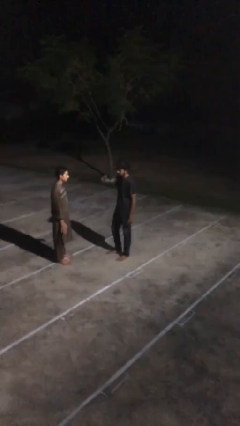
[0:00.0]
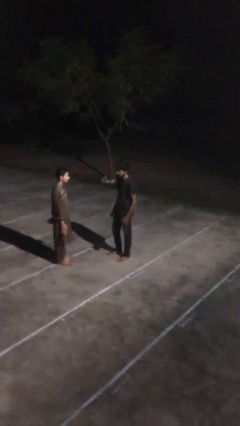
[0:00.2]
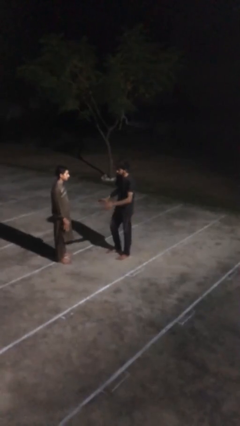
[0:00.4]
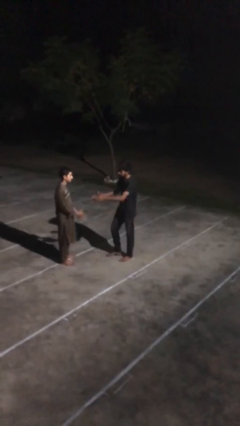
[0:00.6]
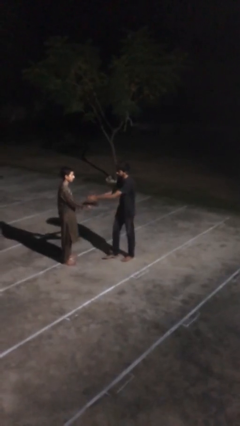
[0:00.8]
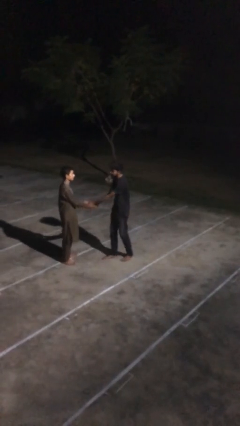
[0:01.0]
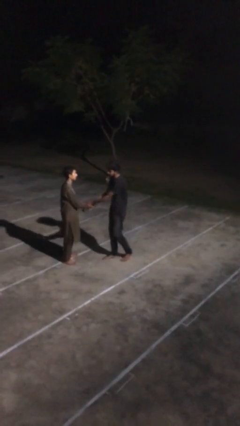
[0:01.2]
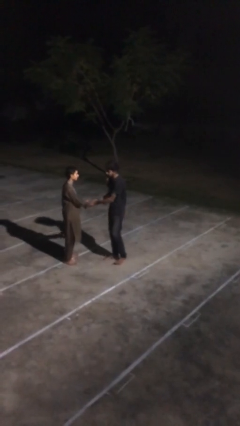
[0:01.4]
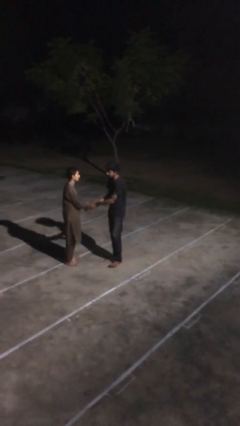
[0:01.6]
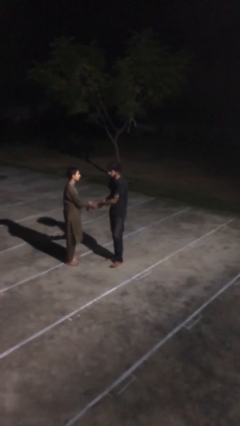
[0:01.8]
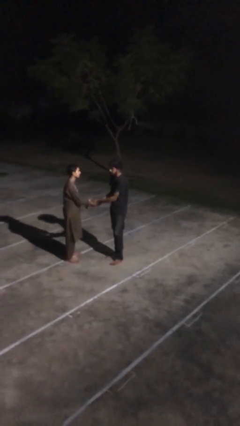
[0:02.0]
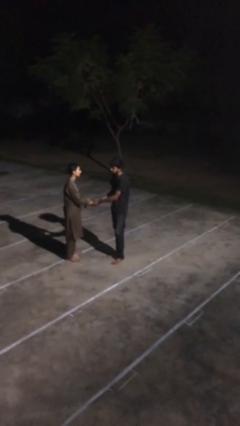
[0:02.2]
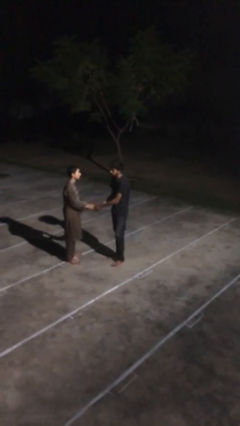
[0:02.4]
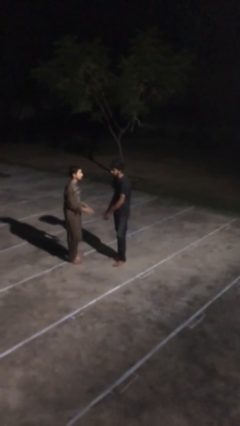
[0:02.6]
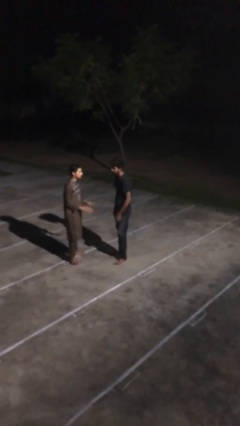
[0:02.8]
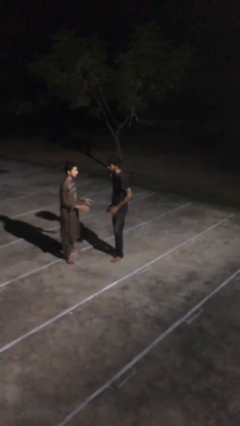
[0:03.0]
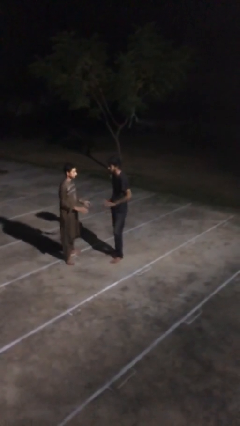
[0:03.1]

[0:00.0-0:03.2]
person shakes hand

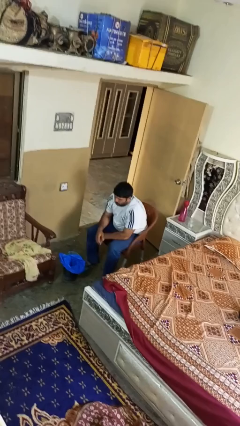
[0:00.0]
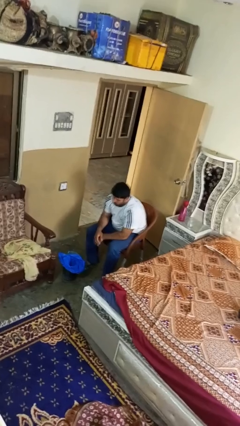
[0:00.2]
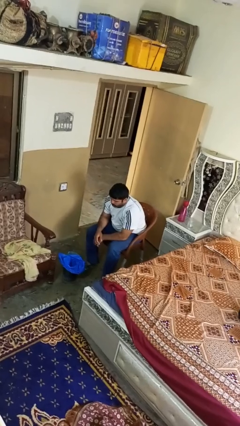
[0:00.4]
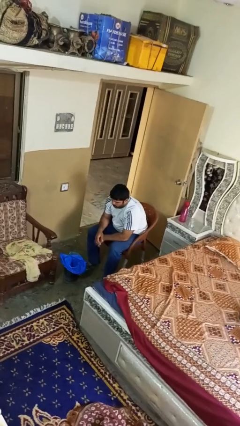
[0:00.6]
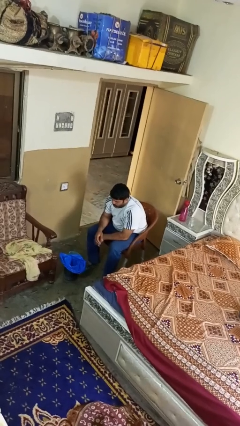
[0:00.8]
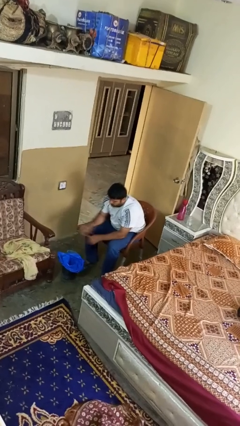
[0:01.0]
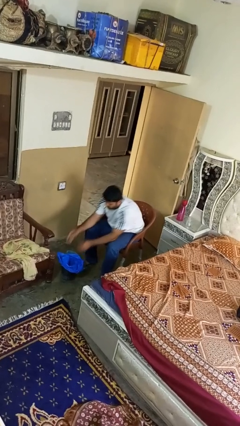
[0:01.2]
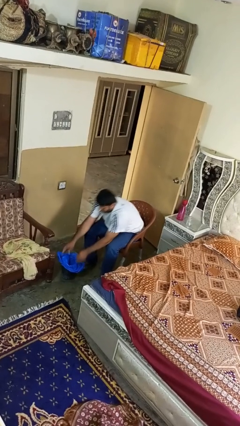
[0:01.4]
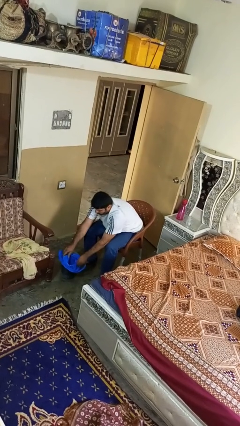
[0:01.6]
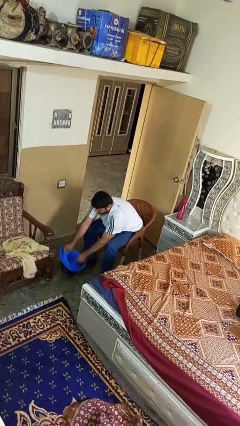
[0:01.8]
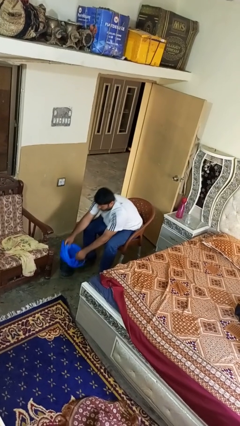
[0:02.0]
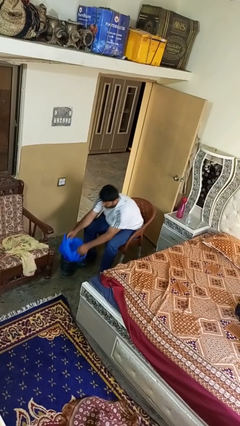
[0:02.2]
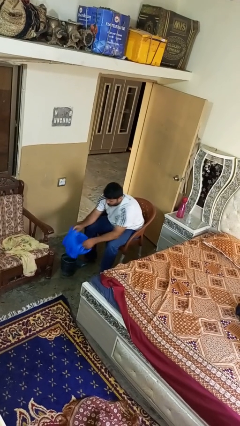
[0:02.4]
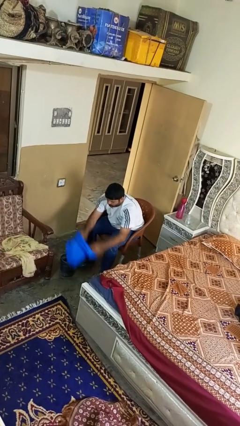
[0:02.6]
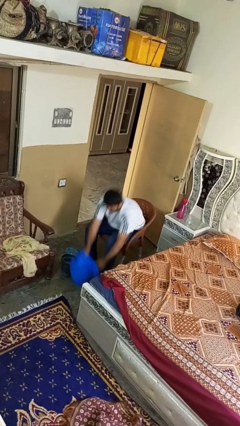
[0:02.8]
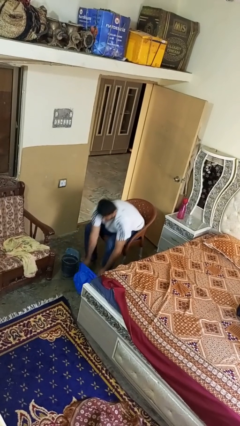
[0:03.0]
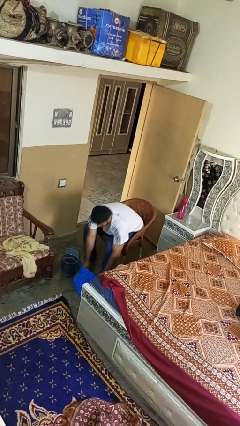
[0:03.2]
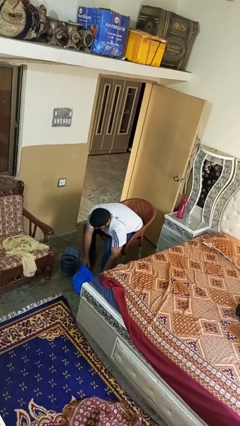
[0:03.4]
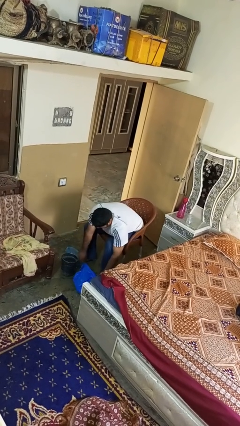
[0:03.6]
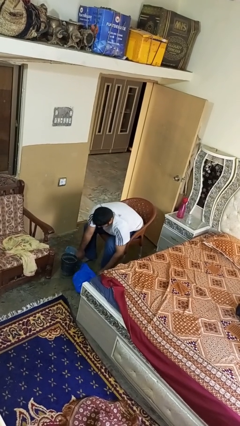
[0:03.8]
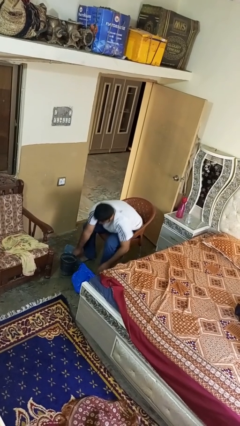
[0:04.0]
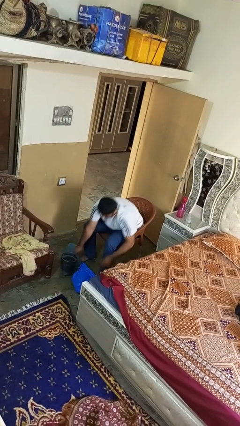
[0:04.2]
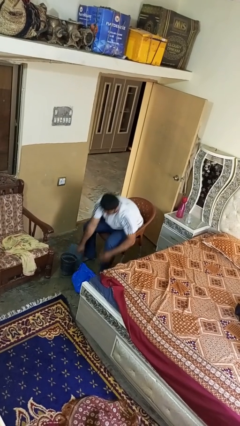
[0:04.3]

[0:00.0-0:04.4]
person removes trashbag from trashcan

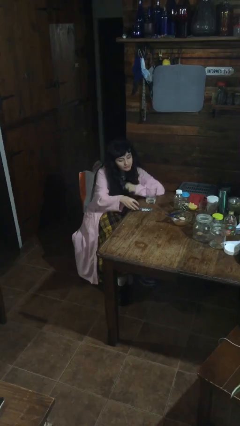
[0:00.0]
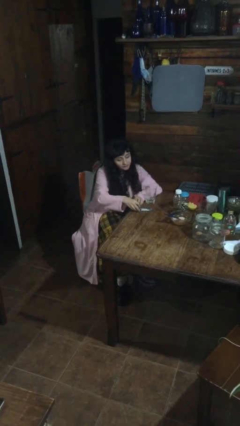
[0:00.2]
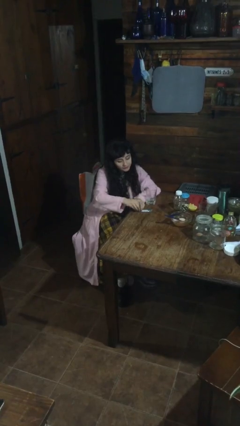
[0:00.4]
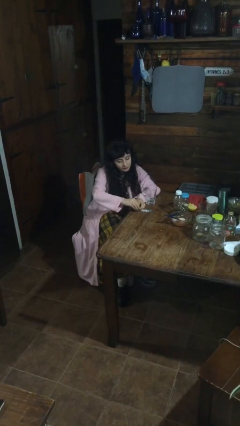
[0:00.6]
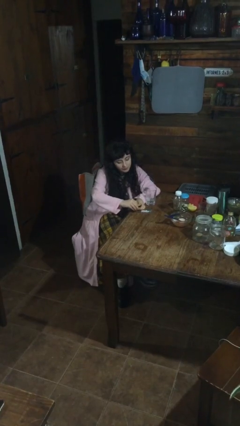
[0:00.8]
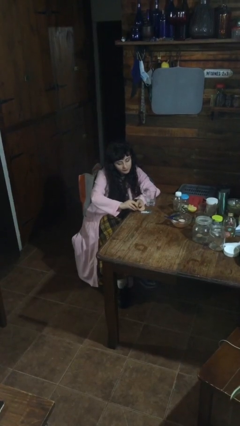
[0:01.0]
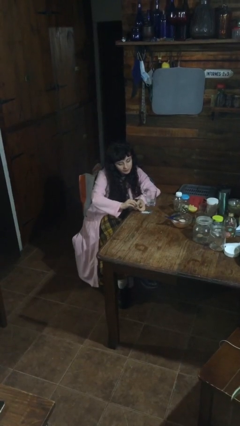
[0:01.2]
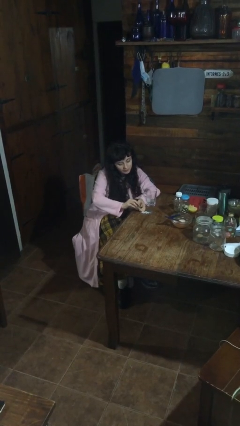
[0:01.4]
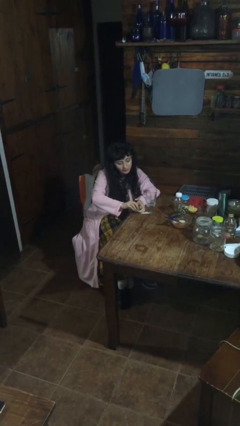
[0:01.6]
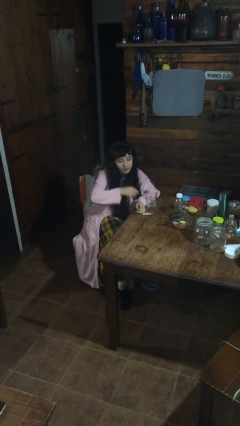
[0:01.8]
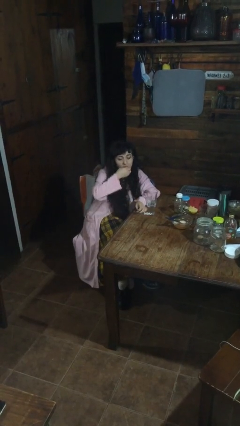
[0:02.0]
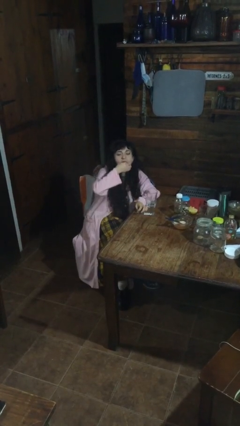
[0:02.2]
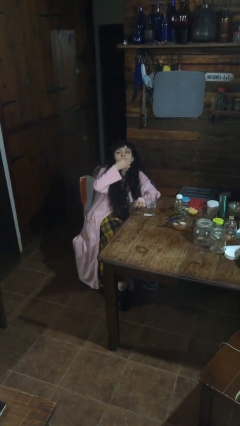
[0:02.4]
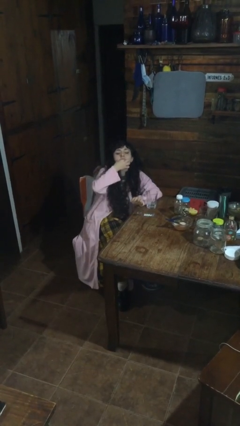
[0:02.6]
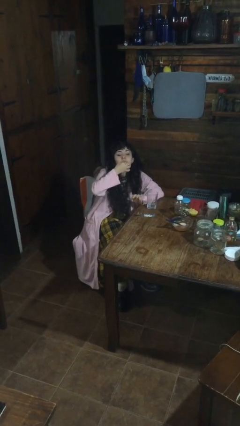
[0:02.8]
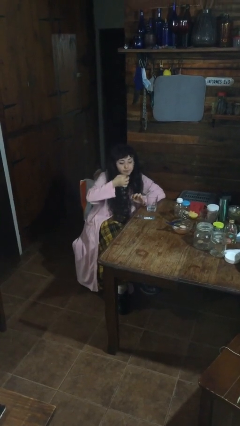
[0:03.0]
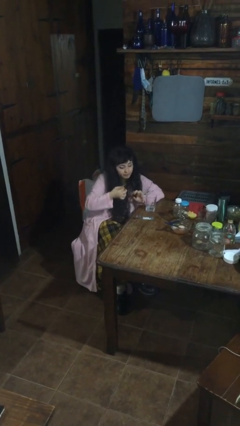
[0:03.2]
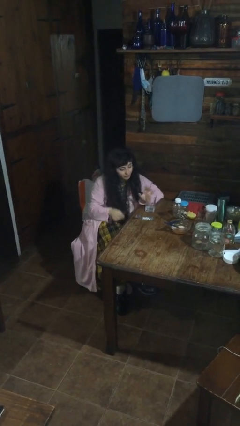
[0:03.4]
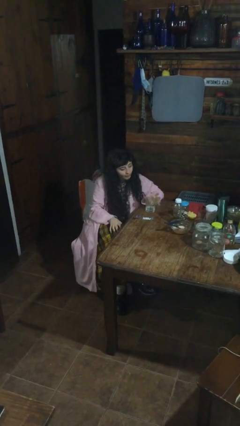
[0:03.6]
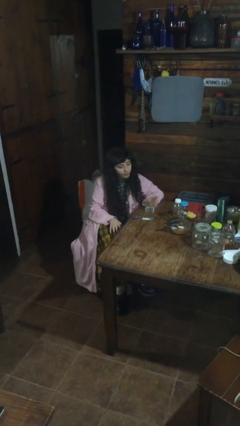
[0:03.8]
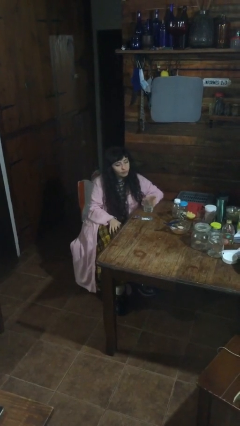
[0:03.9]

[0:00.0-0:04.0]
person takes medicine pills

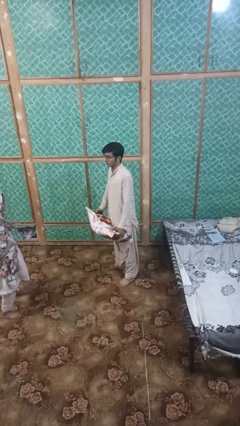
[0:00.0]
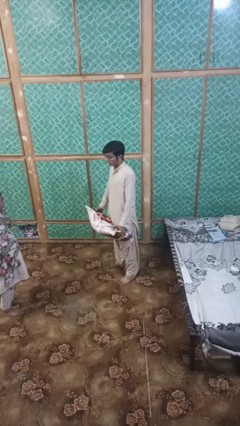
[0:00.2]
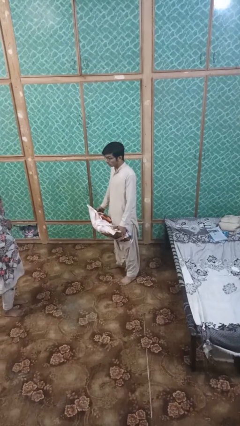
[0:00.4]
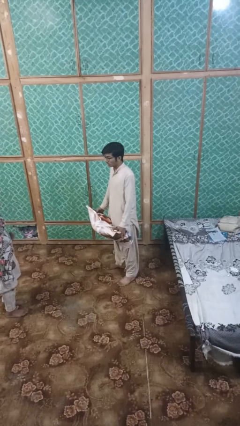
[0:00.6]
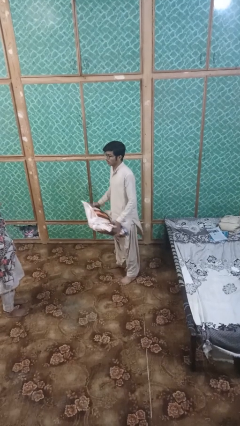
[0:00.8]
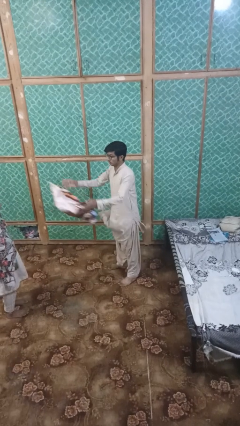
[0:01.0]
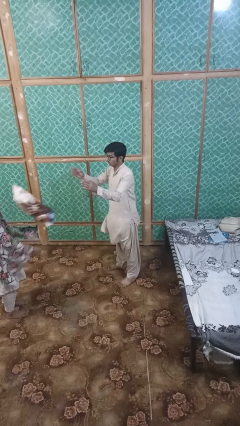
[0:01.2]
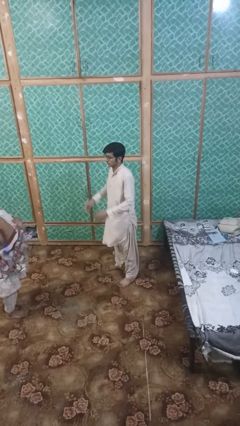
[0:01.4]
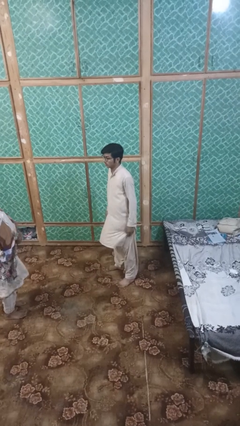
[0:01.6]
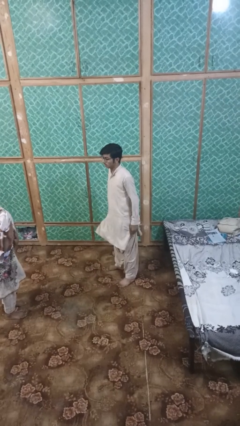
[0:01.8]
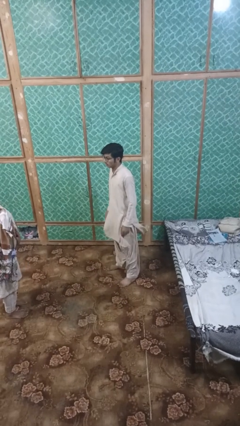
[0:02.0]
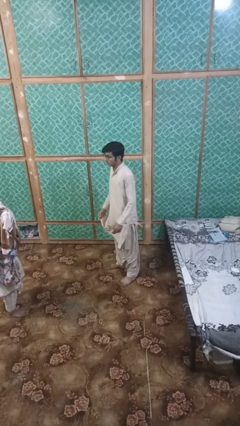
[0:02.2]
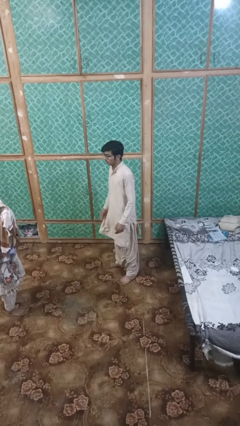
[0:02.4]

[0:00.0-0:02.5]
person throws object to person

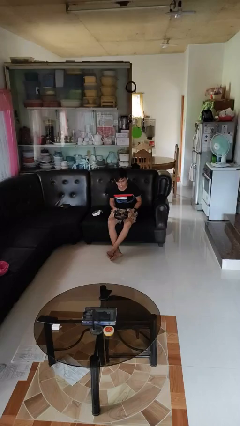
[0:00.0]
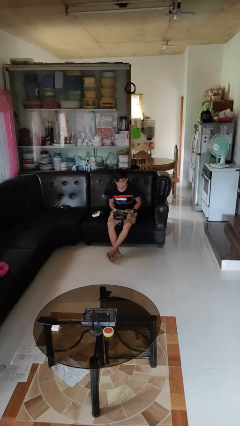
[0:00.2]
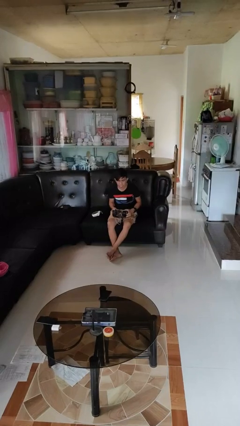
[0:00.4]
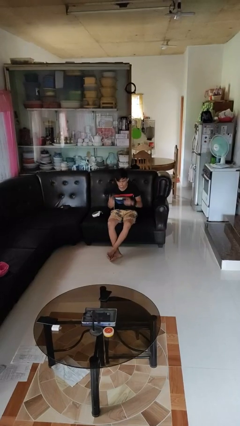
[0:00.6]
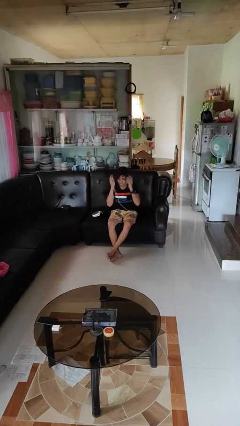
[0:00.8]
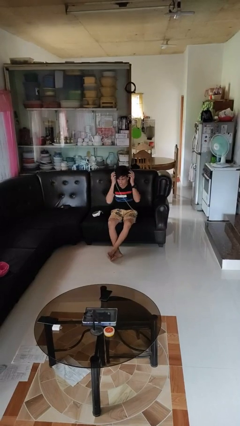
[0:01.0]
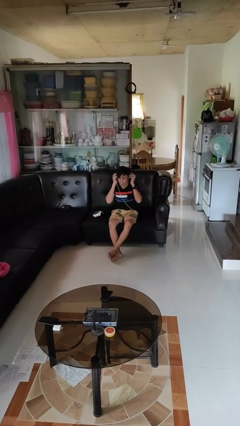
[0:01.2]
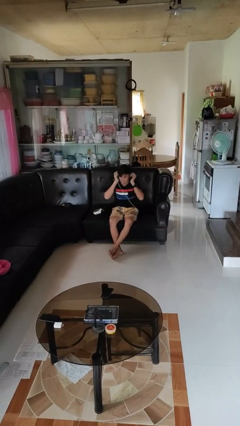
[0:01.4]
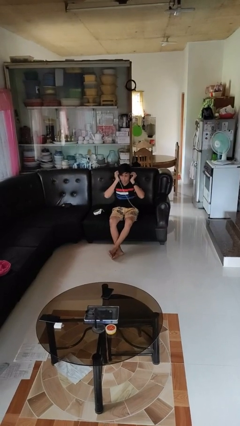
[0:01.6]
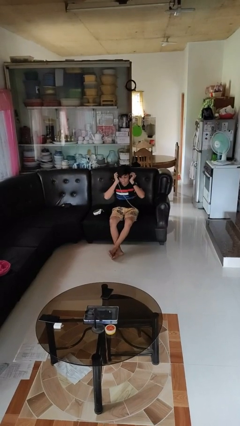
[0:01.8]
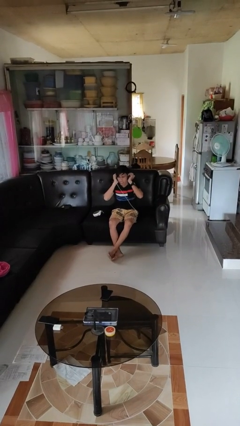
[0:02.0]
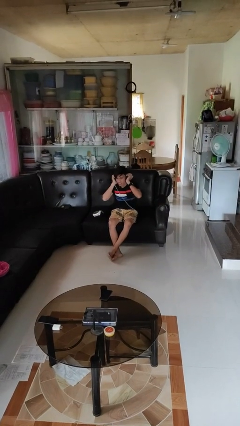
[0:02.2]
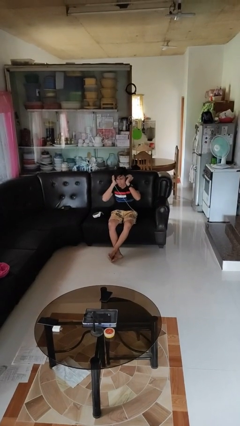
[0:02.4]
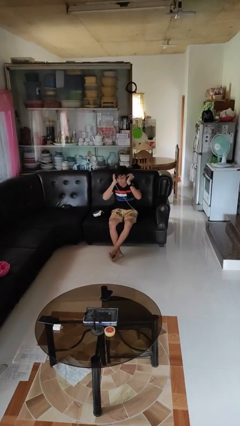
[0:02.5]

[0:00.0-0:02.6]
person puts on headphones

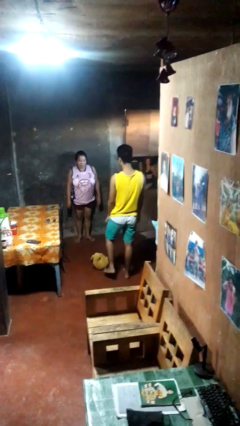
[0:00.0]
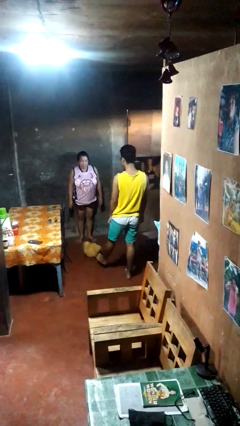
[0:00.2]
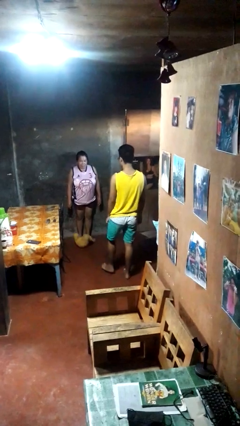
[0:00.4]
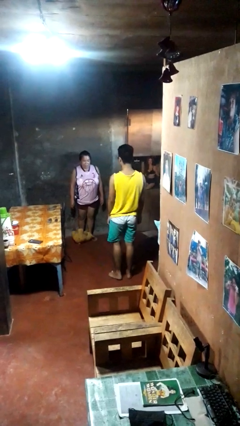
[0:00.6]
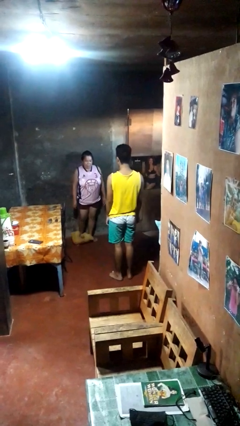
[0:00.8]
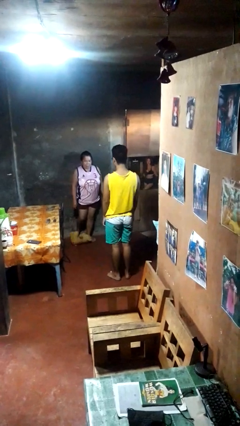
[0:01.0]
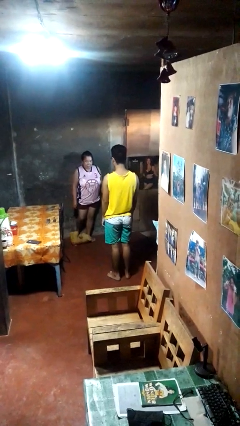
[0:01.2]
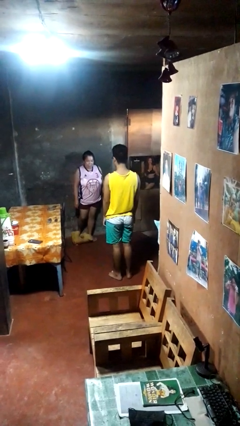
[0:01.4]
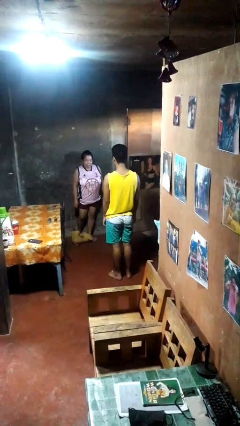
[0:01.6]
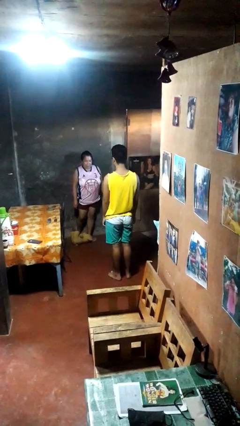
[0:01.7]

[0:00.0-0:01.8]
person kicks object to person
